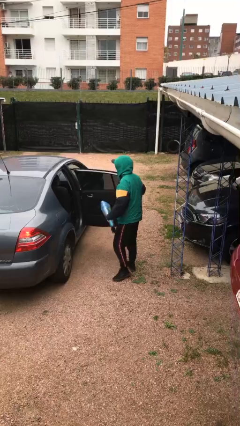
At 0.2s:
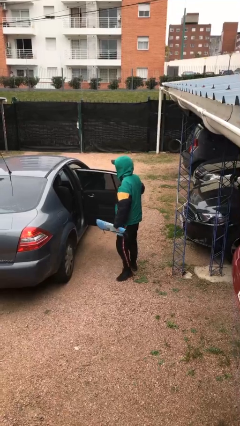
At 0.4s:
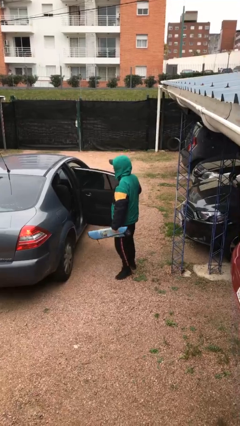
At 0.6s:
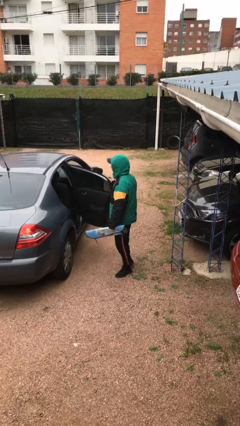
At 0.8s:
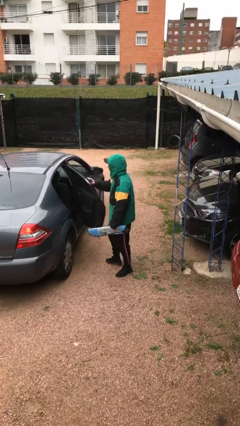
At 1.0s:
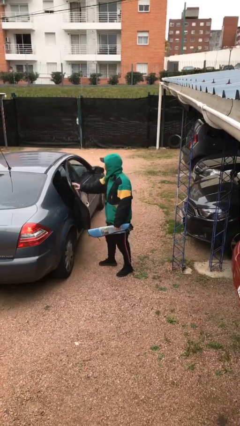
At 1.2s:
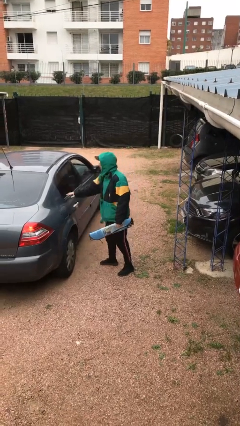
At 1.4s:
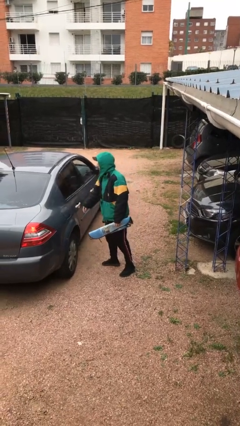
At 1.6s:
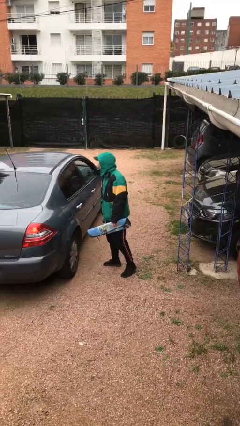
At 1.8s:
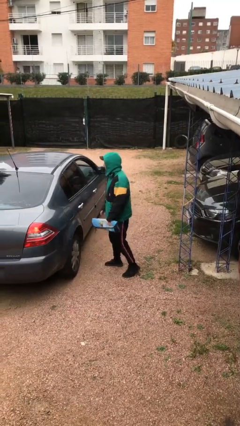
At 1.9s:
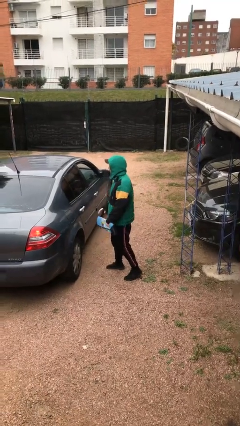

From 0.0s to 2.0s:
person closes car door

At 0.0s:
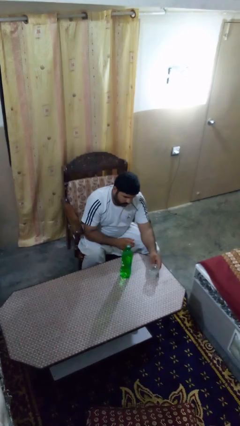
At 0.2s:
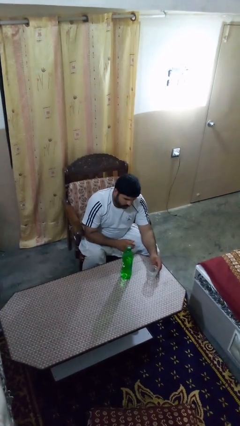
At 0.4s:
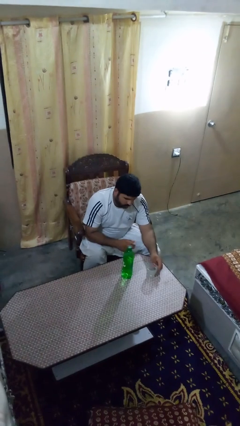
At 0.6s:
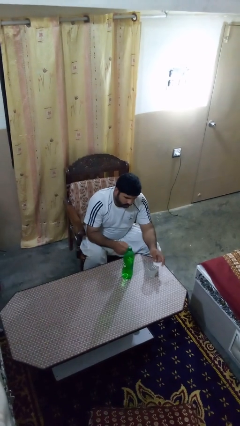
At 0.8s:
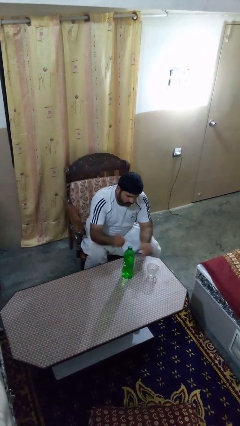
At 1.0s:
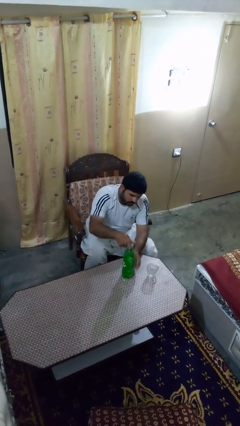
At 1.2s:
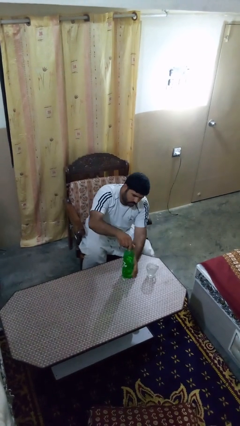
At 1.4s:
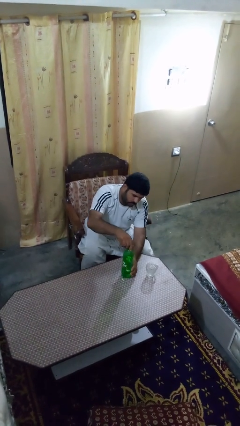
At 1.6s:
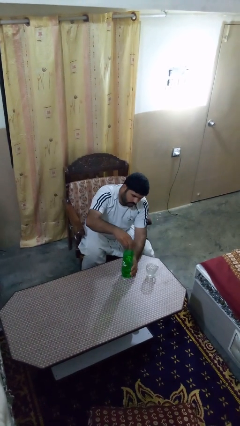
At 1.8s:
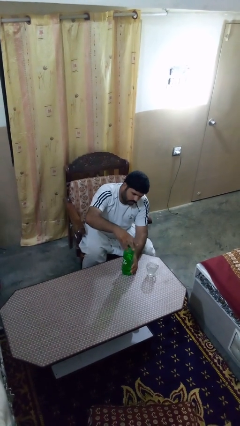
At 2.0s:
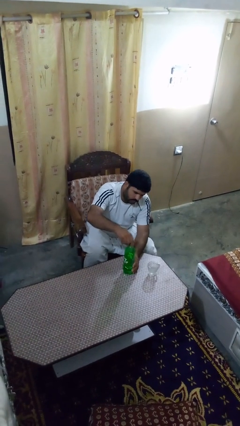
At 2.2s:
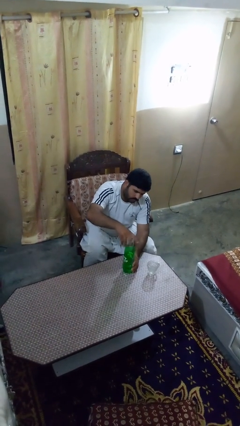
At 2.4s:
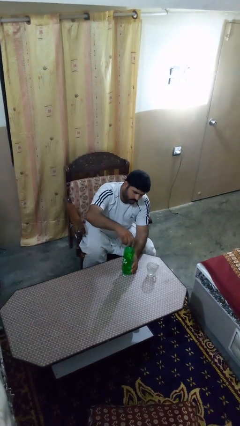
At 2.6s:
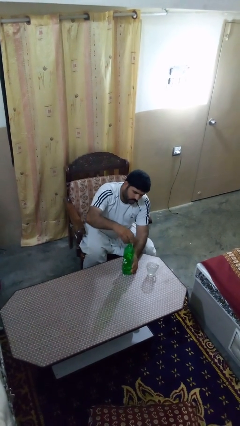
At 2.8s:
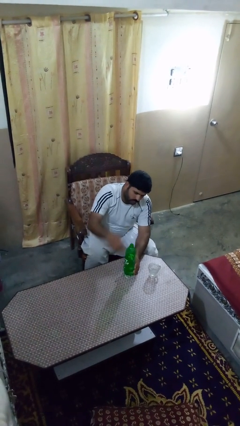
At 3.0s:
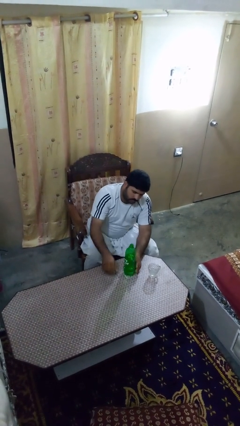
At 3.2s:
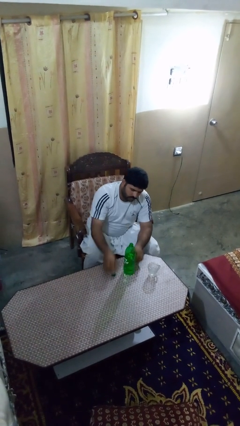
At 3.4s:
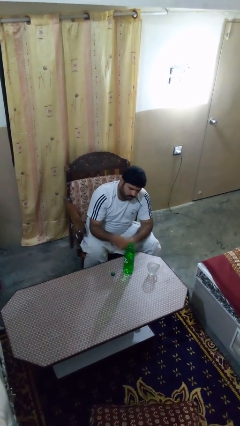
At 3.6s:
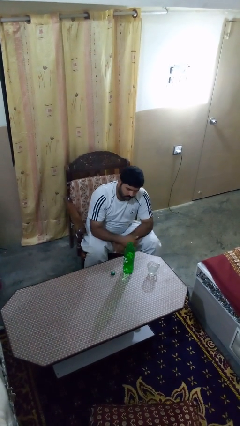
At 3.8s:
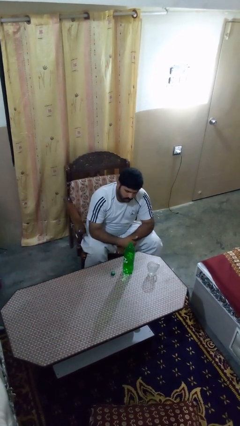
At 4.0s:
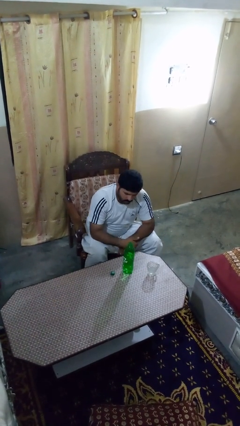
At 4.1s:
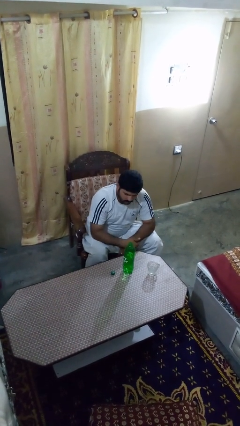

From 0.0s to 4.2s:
person unscrews lid from bottle

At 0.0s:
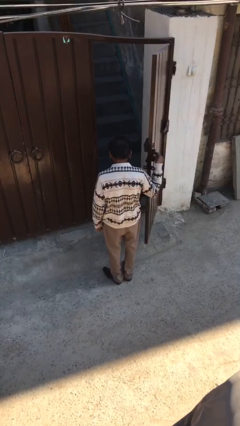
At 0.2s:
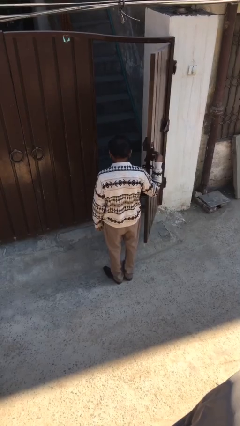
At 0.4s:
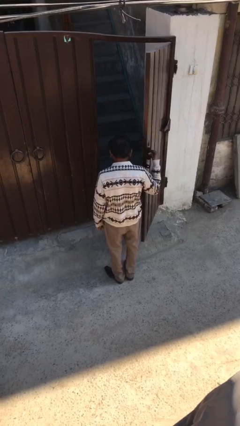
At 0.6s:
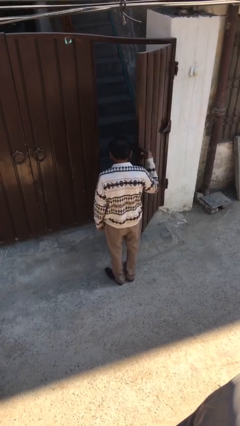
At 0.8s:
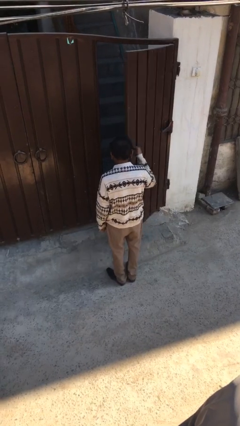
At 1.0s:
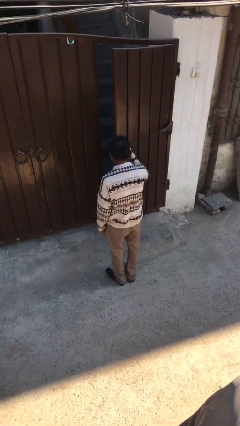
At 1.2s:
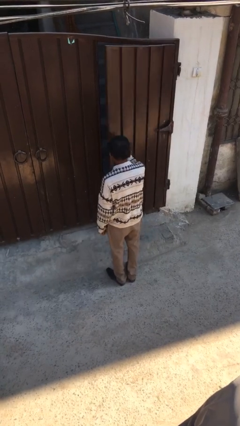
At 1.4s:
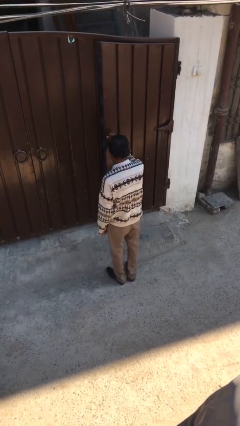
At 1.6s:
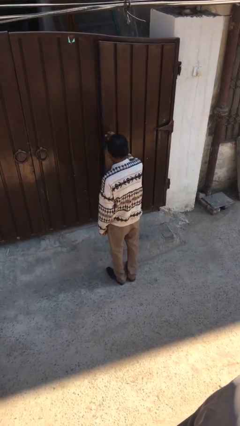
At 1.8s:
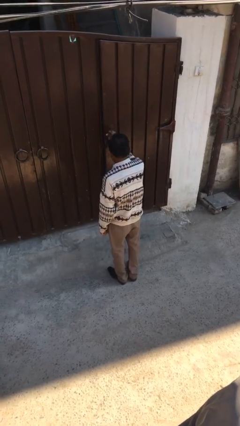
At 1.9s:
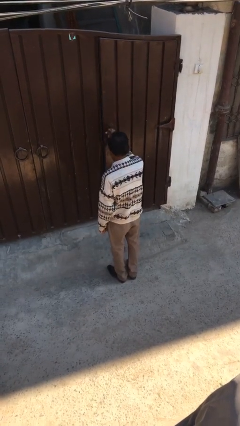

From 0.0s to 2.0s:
person closes facility door

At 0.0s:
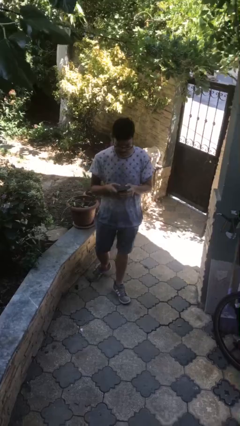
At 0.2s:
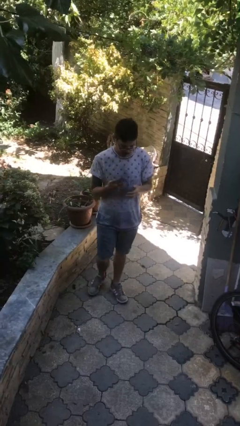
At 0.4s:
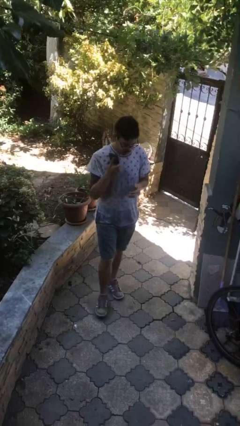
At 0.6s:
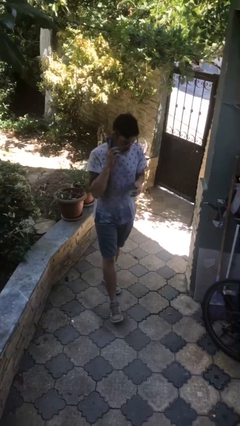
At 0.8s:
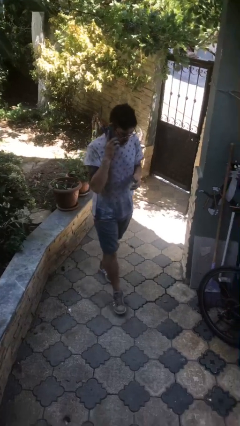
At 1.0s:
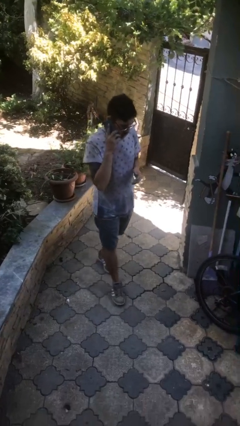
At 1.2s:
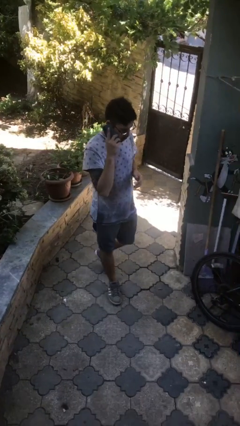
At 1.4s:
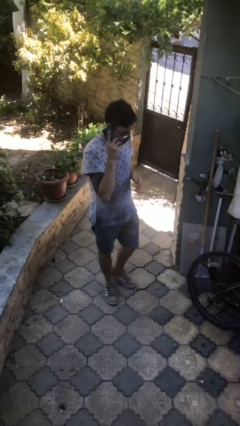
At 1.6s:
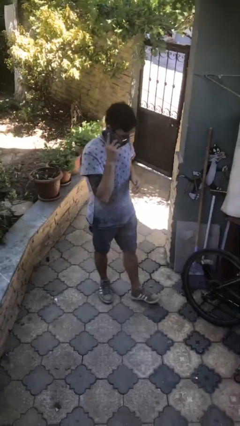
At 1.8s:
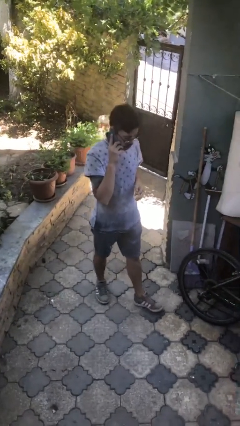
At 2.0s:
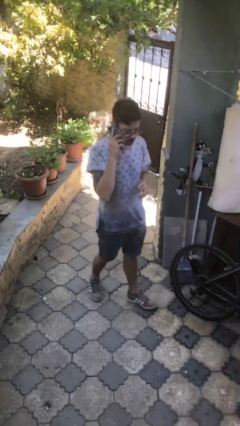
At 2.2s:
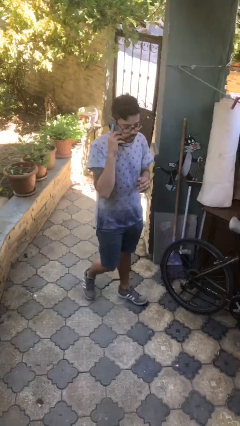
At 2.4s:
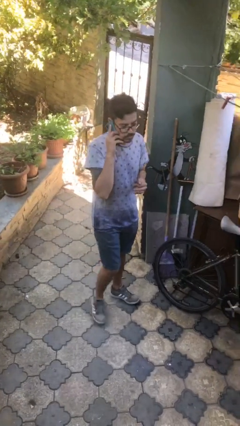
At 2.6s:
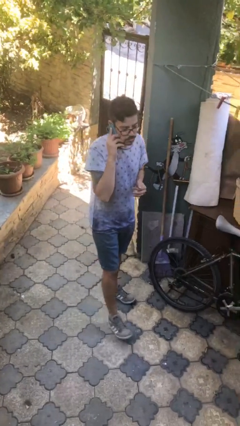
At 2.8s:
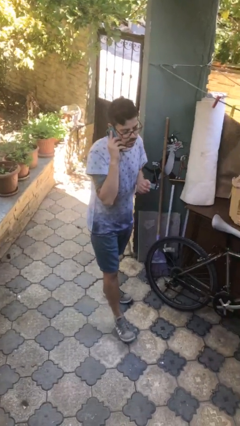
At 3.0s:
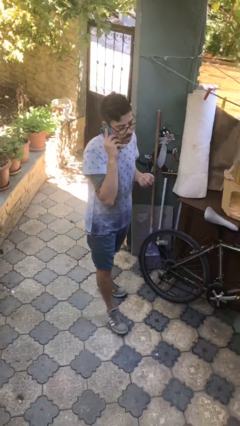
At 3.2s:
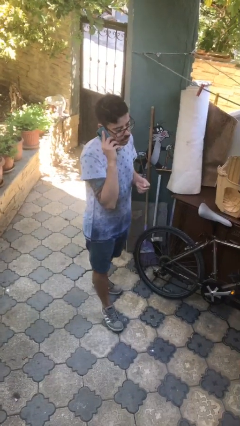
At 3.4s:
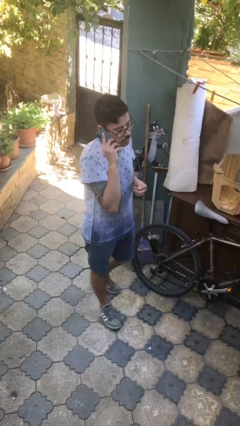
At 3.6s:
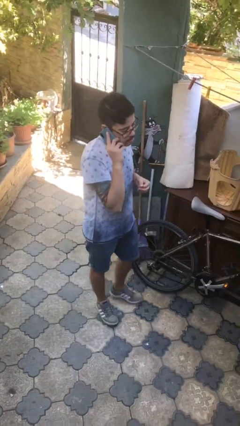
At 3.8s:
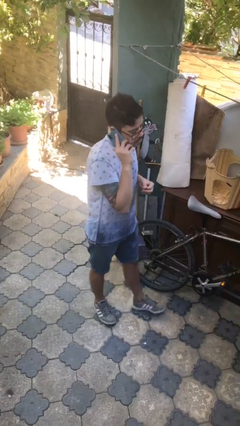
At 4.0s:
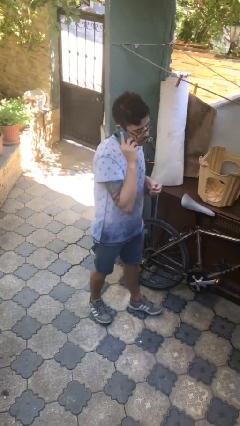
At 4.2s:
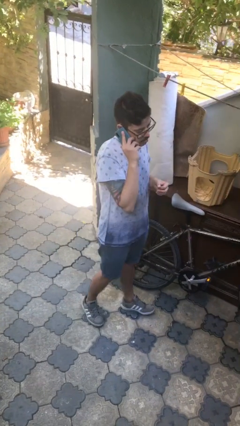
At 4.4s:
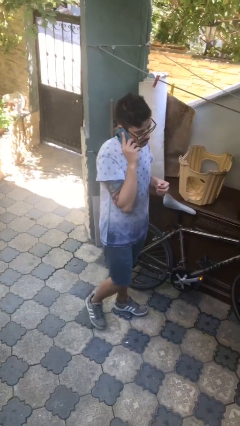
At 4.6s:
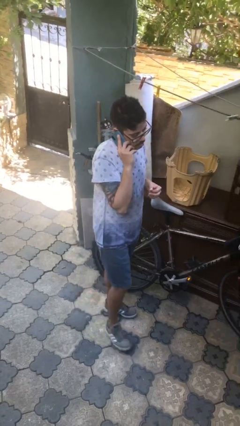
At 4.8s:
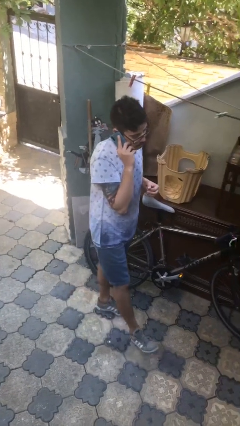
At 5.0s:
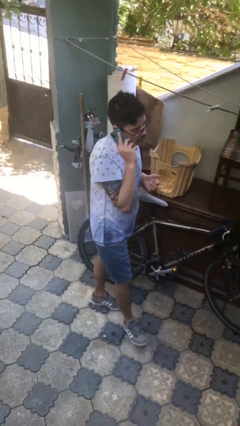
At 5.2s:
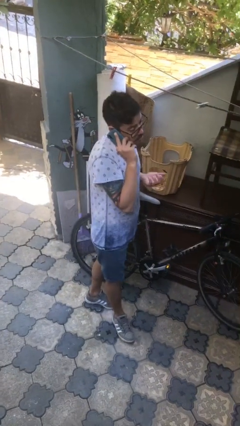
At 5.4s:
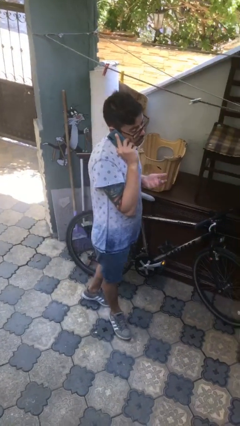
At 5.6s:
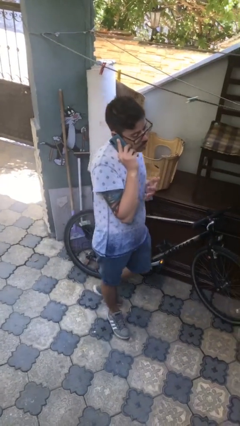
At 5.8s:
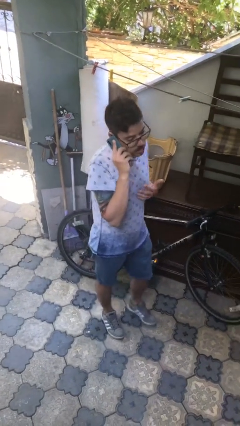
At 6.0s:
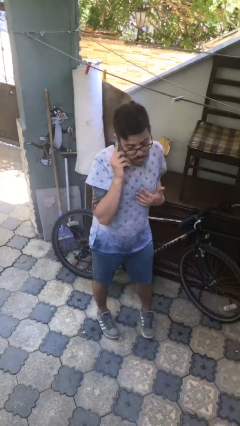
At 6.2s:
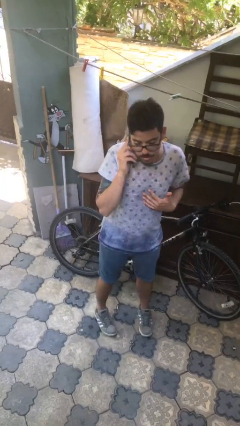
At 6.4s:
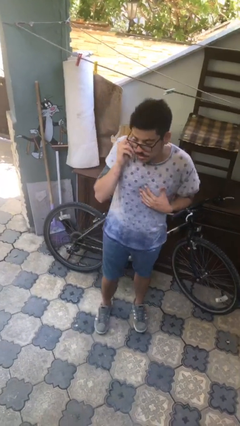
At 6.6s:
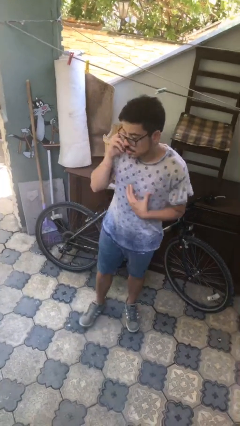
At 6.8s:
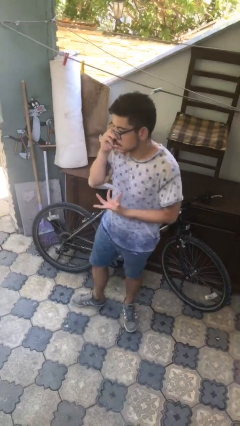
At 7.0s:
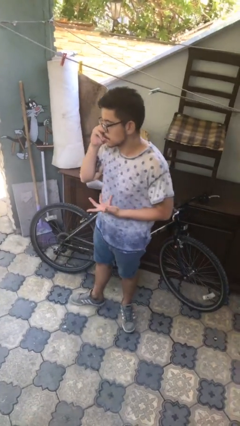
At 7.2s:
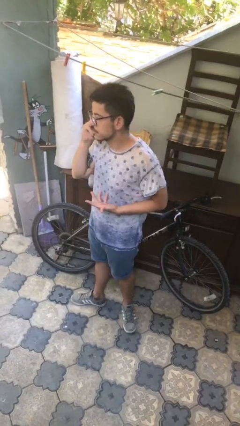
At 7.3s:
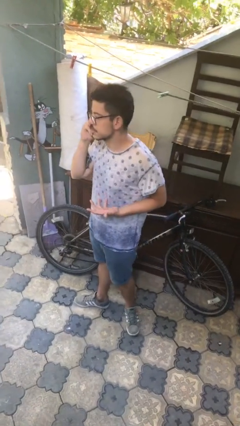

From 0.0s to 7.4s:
person talks on phone

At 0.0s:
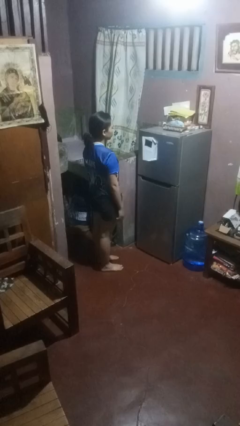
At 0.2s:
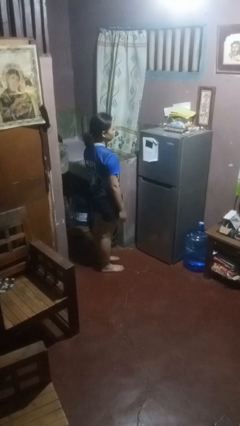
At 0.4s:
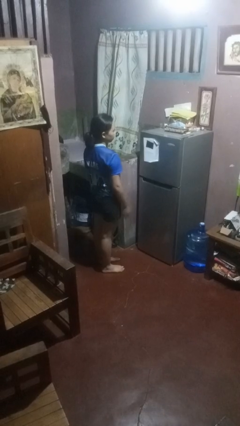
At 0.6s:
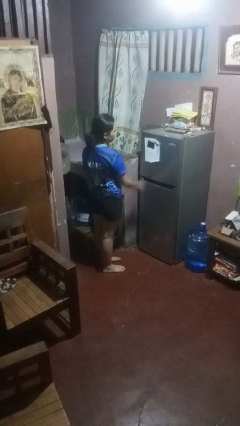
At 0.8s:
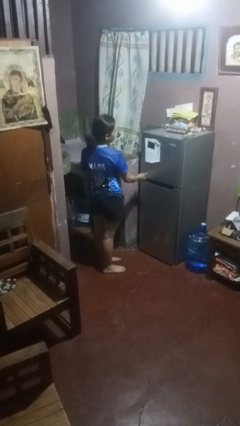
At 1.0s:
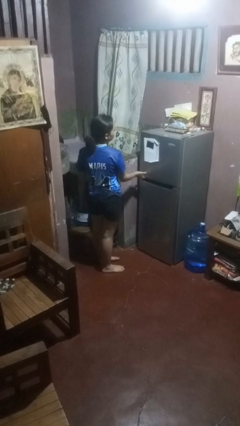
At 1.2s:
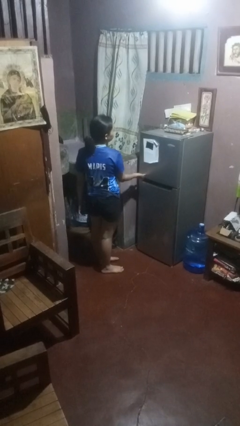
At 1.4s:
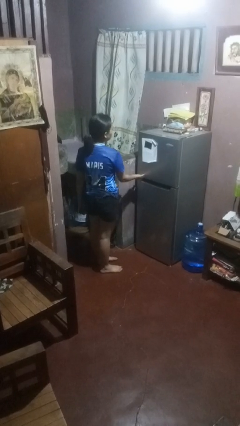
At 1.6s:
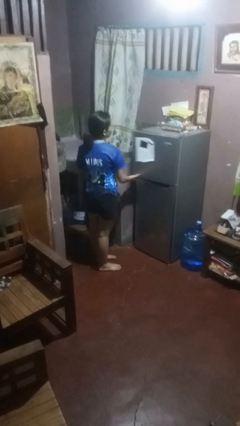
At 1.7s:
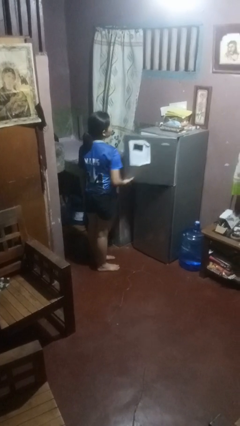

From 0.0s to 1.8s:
person opens refrigerator

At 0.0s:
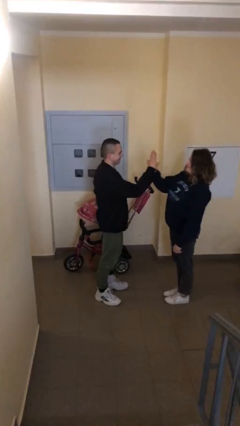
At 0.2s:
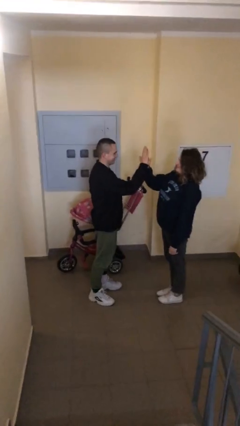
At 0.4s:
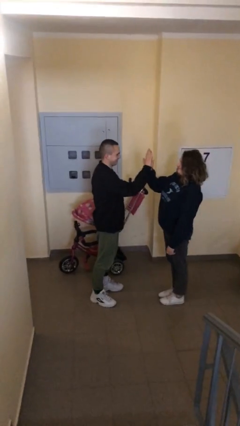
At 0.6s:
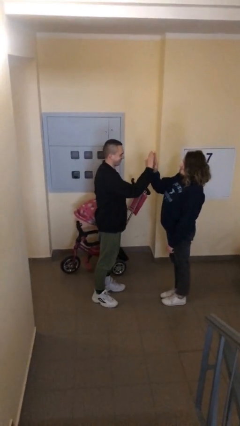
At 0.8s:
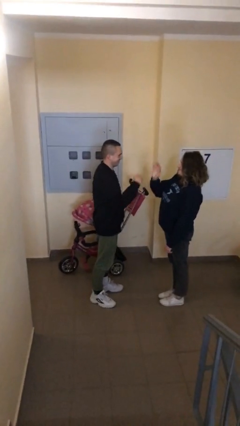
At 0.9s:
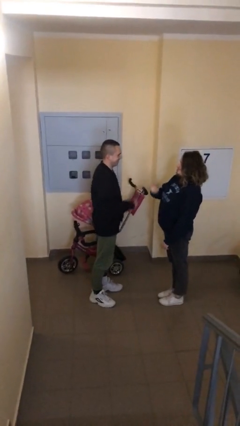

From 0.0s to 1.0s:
person highfives hand
